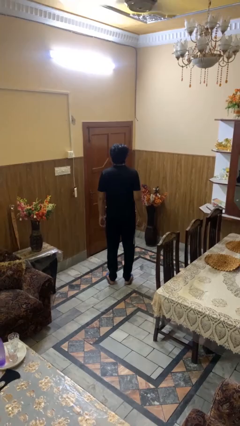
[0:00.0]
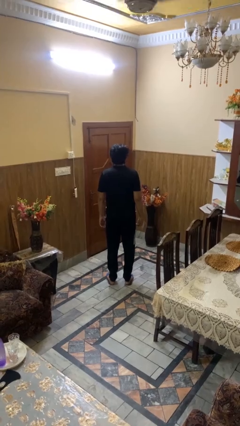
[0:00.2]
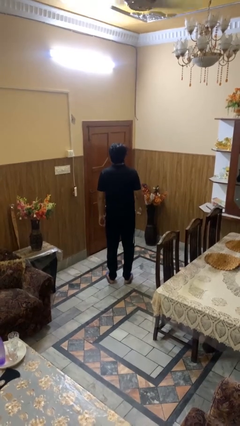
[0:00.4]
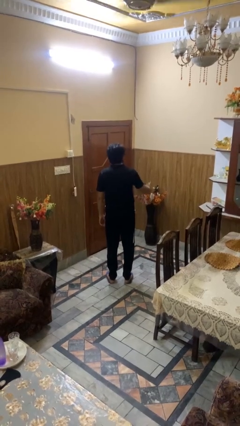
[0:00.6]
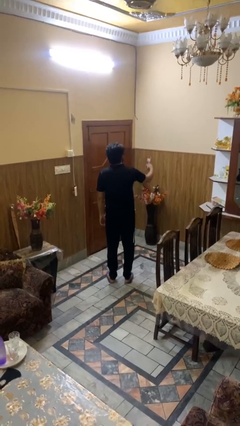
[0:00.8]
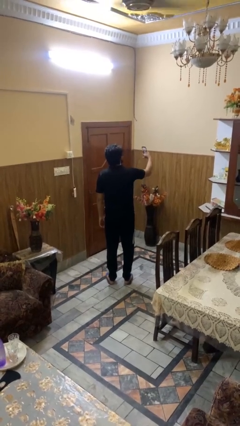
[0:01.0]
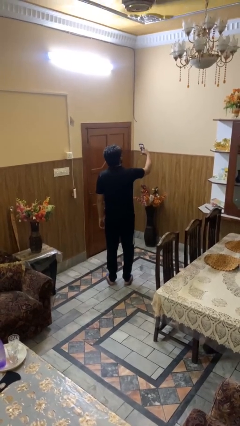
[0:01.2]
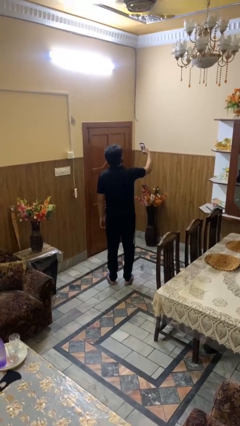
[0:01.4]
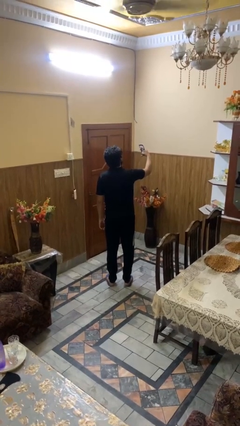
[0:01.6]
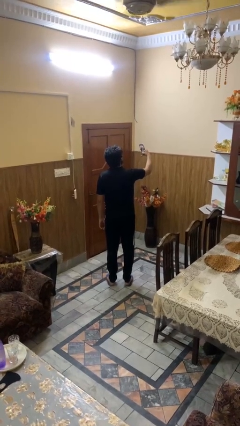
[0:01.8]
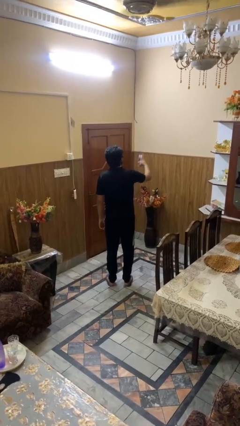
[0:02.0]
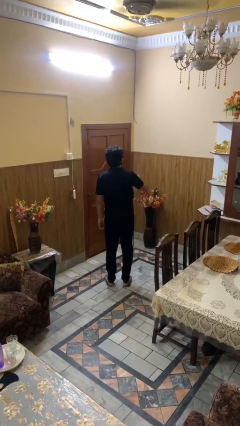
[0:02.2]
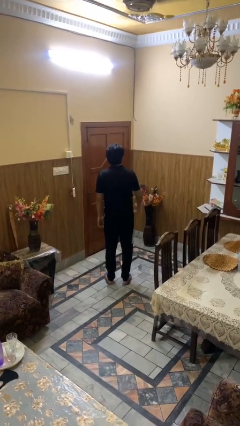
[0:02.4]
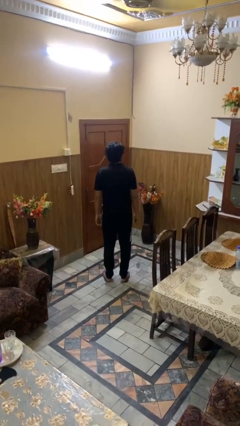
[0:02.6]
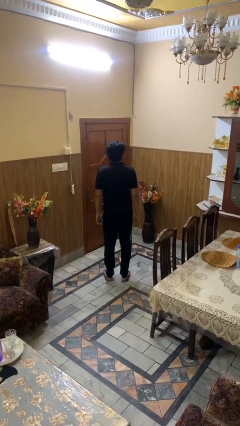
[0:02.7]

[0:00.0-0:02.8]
person takes selfie

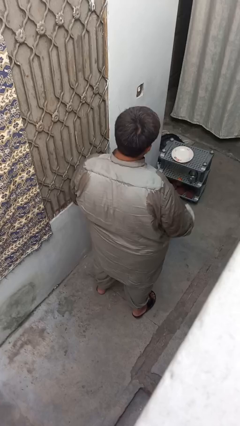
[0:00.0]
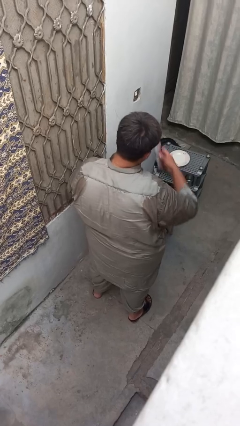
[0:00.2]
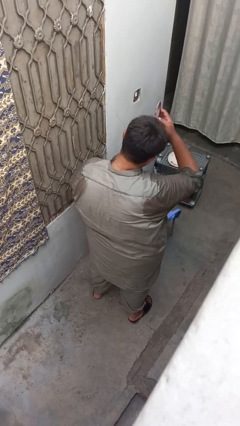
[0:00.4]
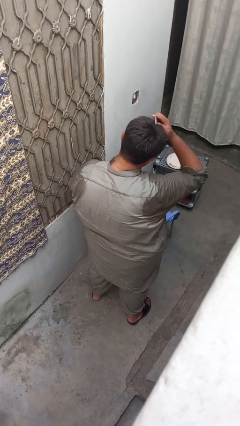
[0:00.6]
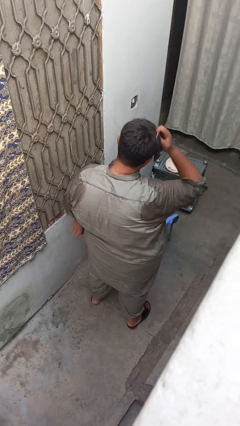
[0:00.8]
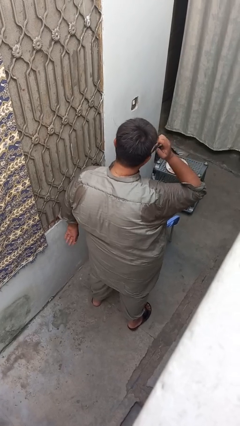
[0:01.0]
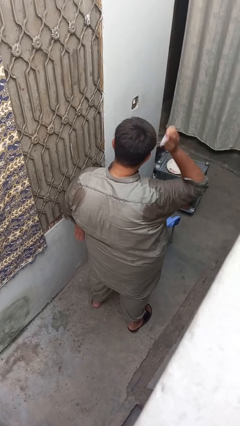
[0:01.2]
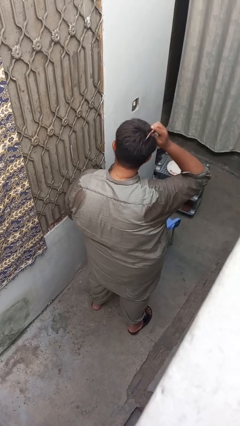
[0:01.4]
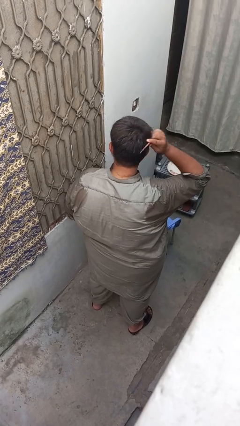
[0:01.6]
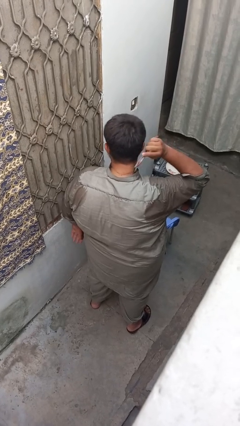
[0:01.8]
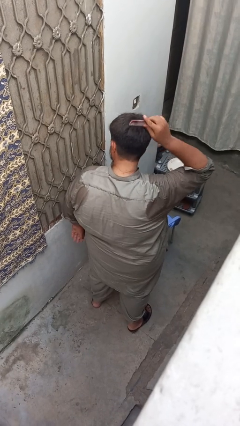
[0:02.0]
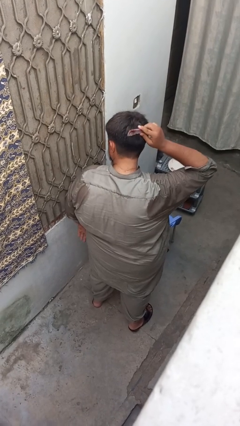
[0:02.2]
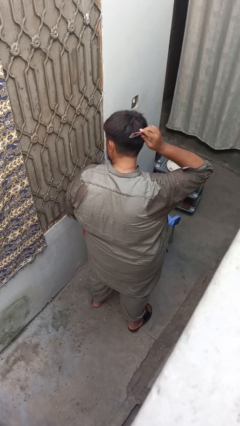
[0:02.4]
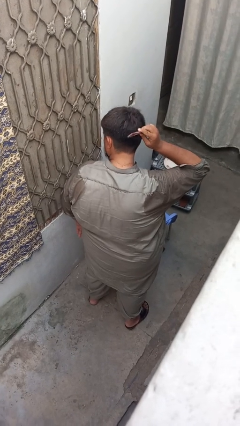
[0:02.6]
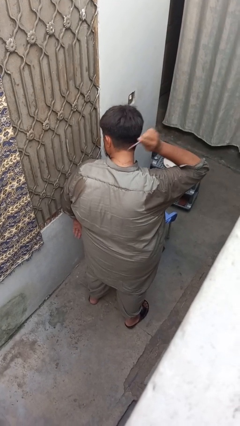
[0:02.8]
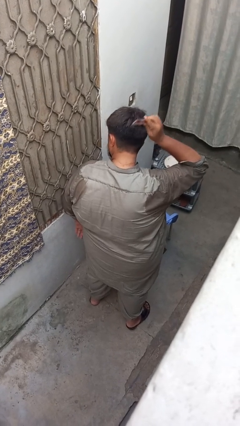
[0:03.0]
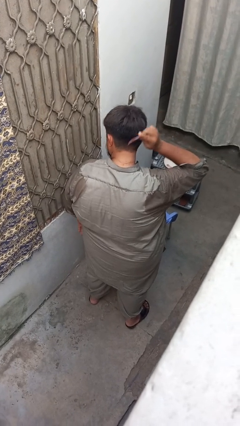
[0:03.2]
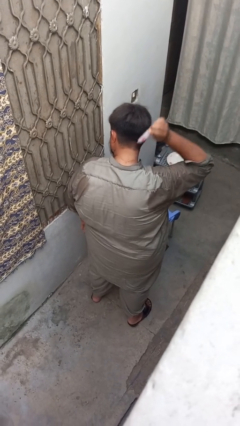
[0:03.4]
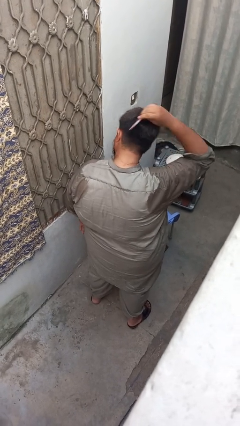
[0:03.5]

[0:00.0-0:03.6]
person brushes hair

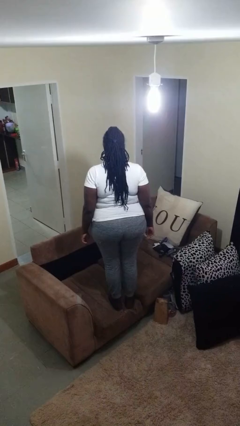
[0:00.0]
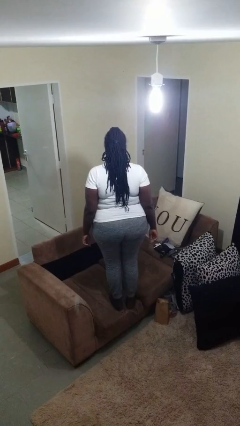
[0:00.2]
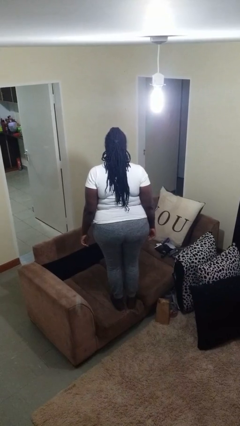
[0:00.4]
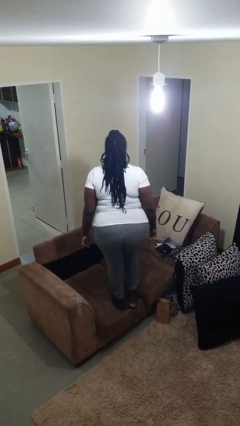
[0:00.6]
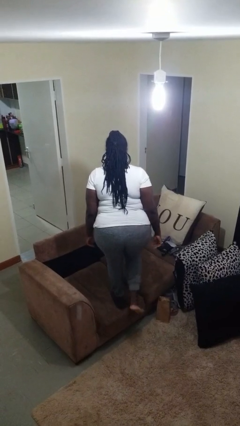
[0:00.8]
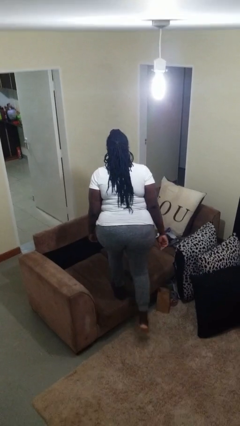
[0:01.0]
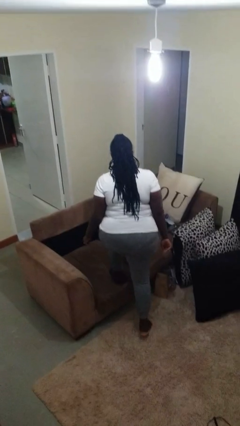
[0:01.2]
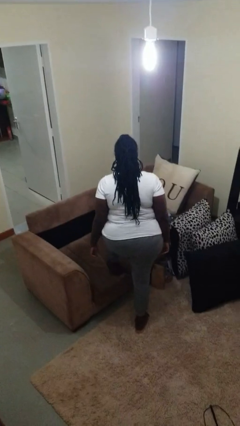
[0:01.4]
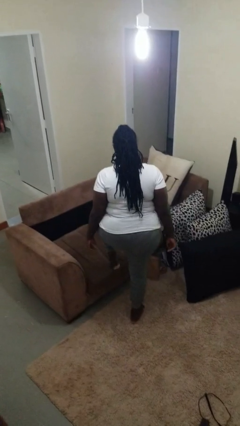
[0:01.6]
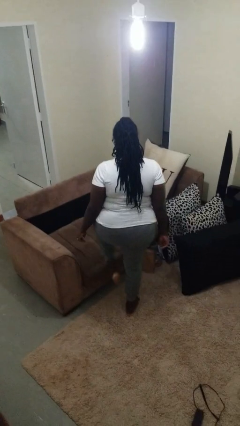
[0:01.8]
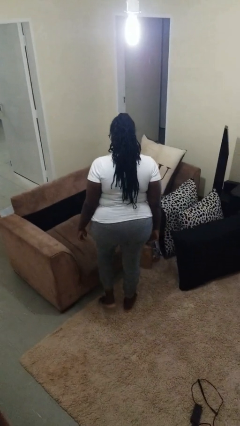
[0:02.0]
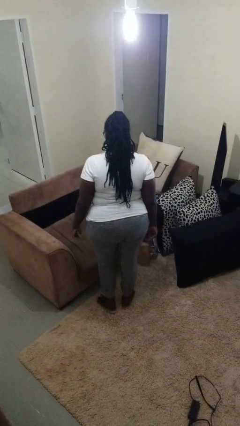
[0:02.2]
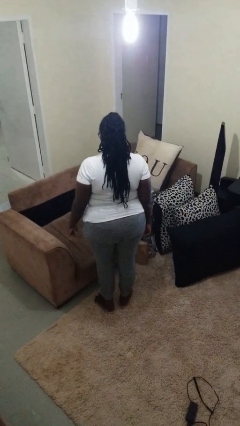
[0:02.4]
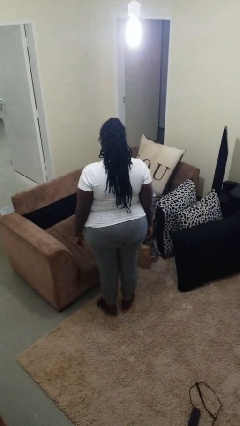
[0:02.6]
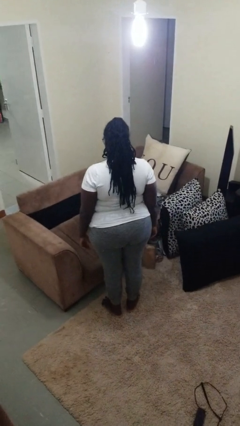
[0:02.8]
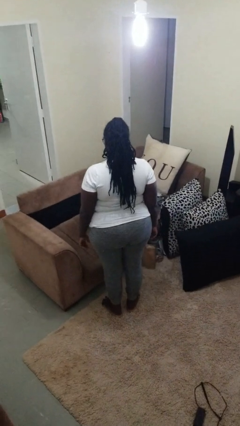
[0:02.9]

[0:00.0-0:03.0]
person climbs off couch

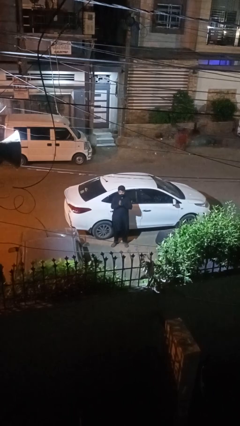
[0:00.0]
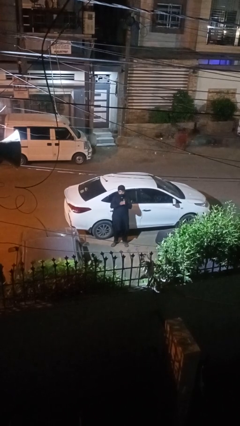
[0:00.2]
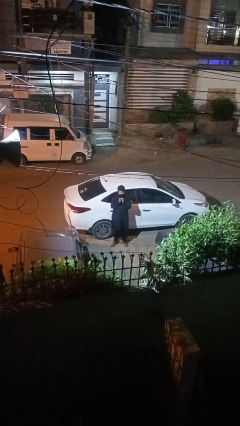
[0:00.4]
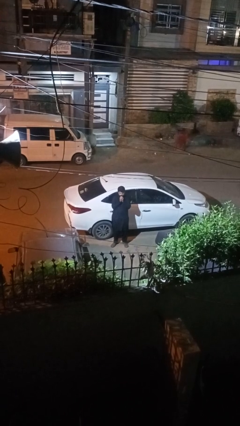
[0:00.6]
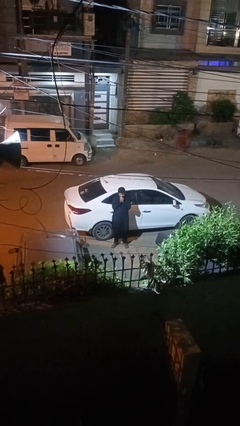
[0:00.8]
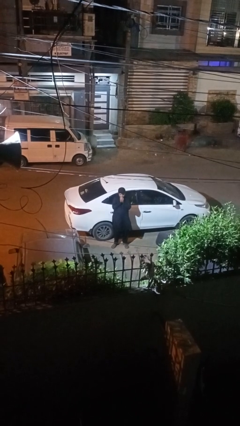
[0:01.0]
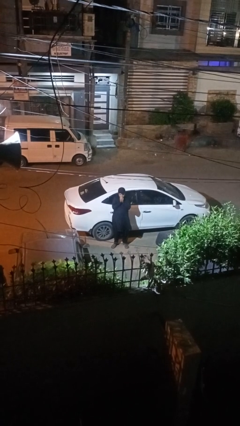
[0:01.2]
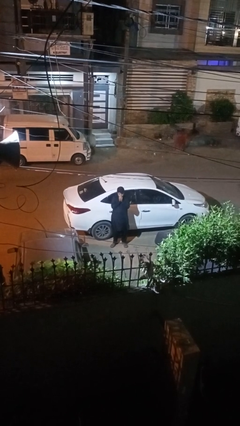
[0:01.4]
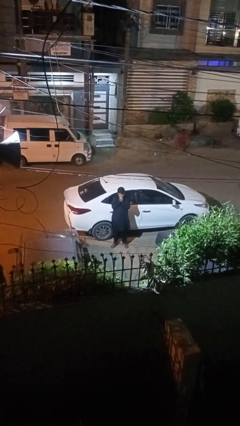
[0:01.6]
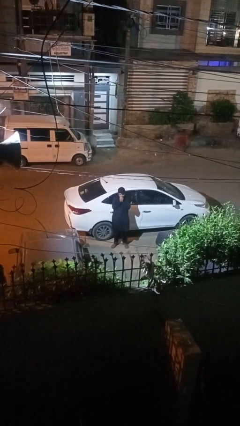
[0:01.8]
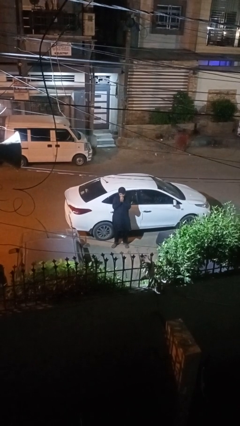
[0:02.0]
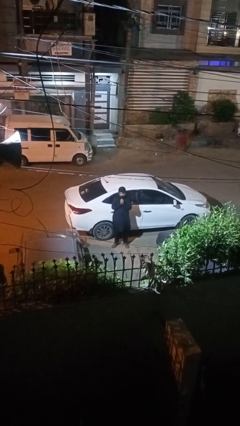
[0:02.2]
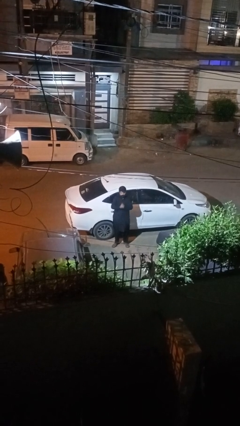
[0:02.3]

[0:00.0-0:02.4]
person blows into hands

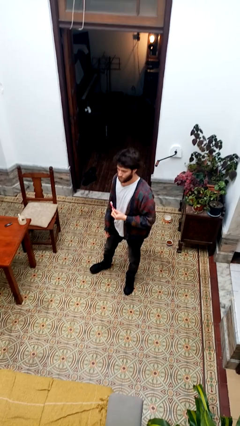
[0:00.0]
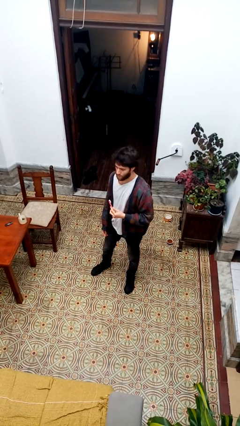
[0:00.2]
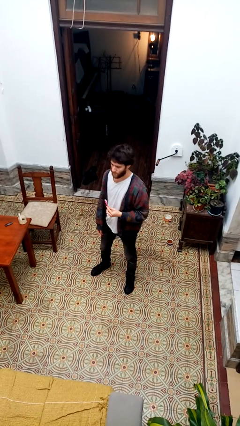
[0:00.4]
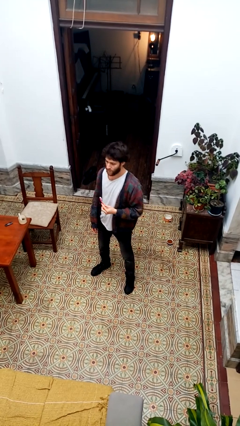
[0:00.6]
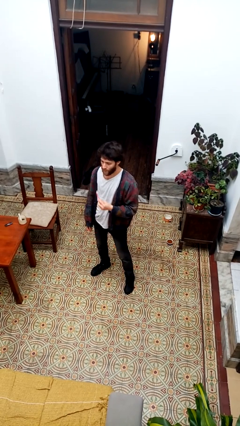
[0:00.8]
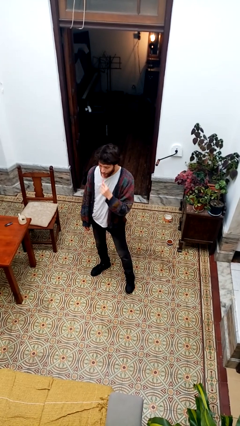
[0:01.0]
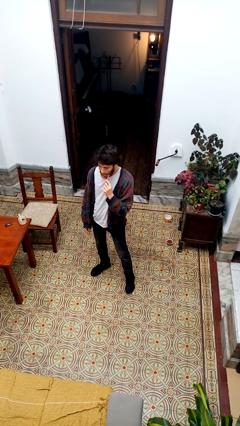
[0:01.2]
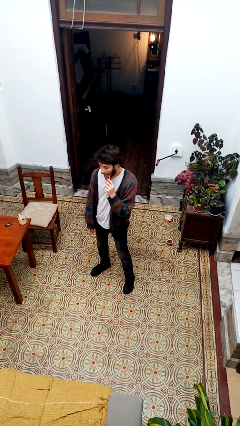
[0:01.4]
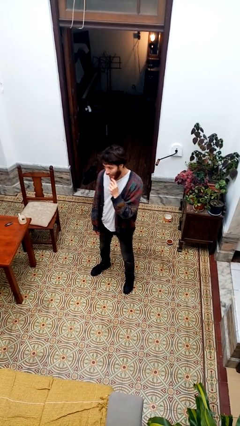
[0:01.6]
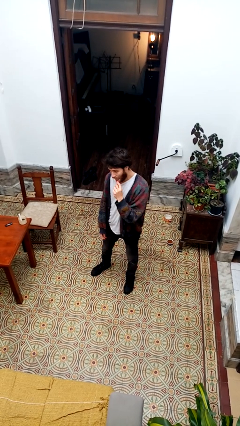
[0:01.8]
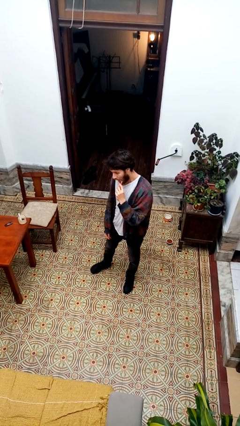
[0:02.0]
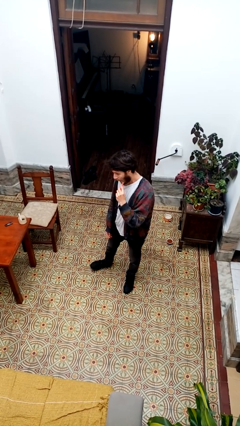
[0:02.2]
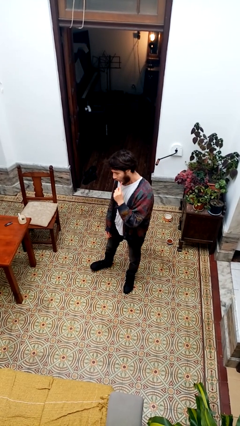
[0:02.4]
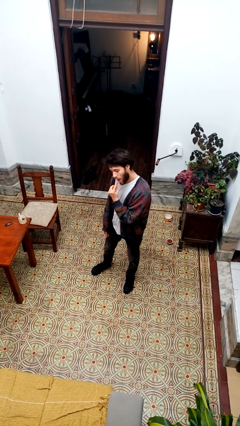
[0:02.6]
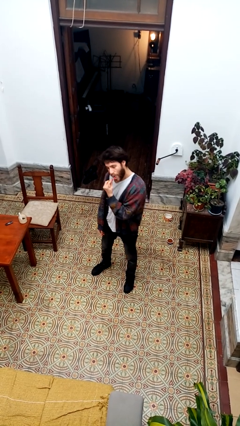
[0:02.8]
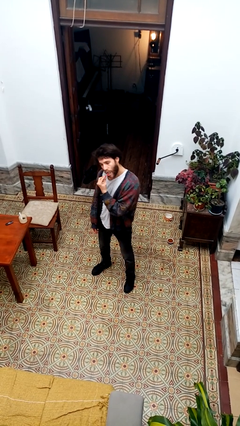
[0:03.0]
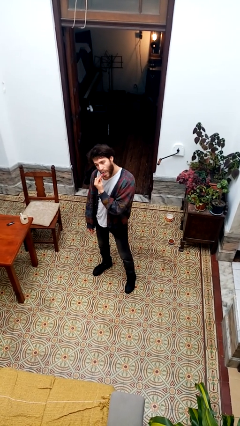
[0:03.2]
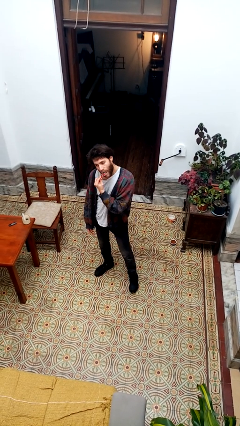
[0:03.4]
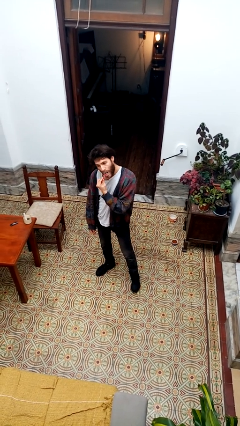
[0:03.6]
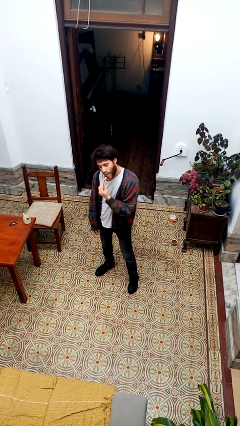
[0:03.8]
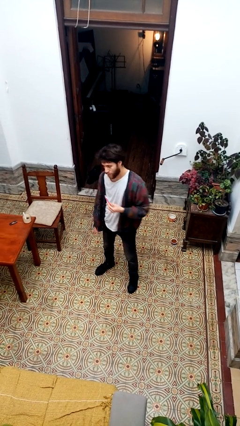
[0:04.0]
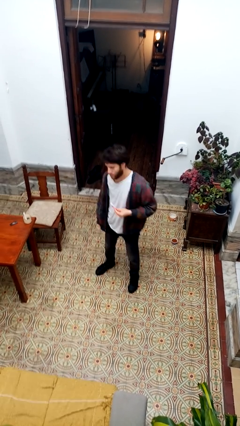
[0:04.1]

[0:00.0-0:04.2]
person brushes teeth

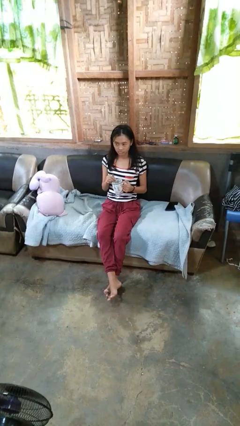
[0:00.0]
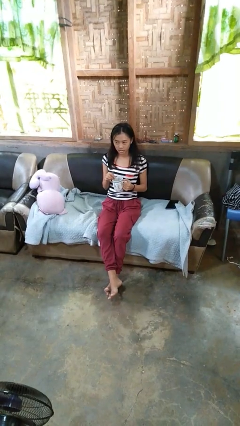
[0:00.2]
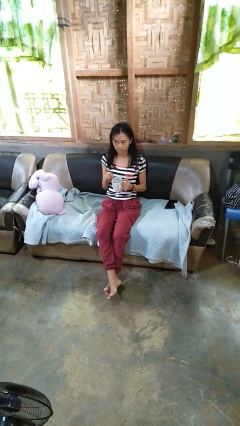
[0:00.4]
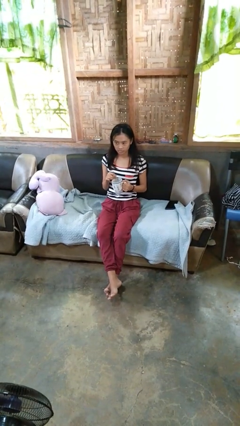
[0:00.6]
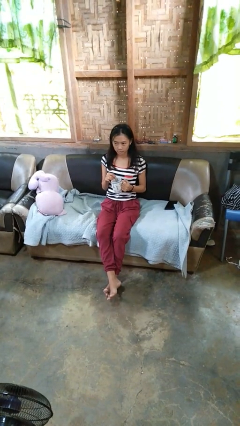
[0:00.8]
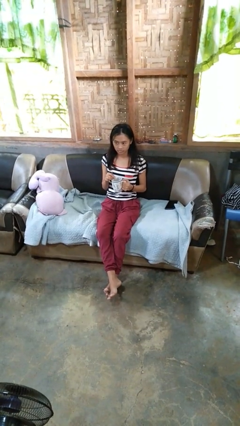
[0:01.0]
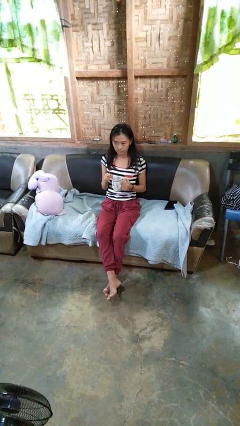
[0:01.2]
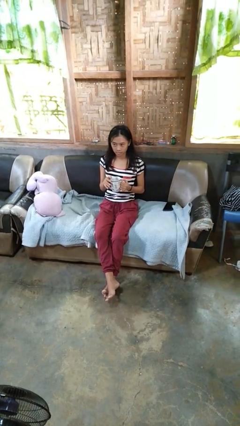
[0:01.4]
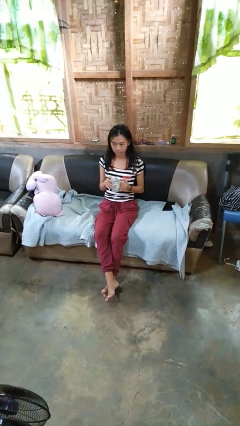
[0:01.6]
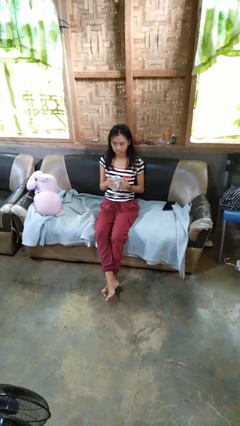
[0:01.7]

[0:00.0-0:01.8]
person stirs mug
